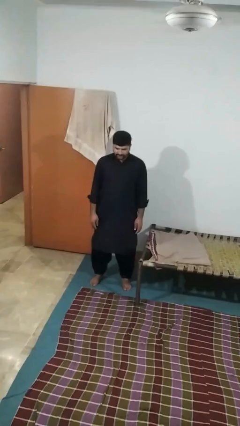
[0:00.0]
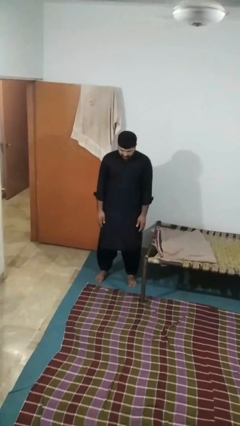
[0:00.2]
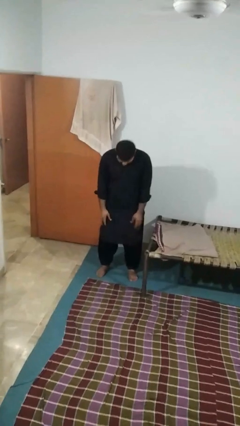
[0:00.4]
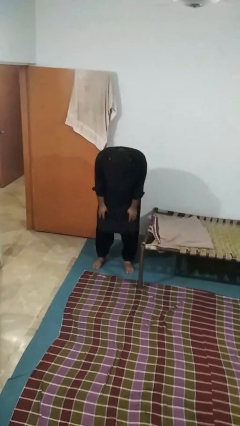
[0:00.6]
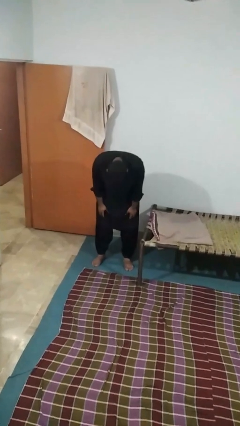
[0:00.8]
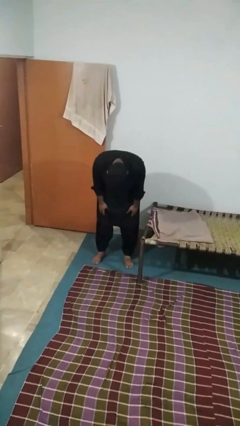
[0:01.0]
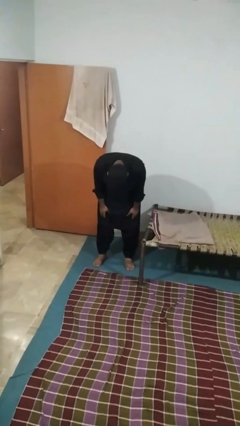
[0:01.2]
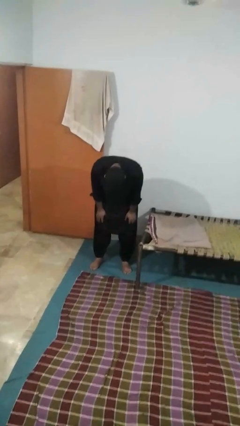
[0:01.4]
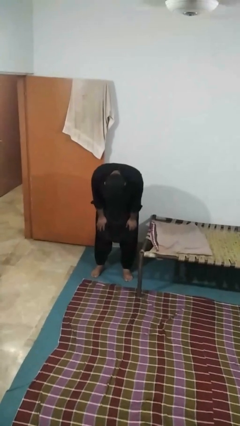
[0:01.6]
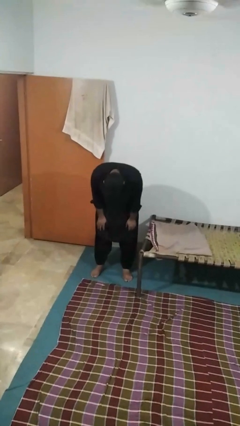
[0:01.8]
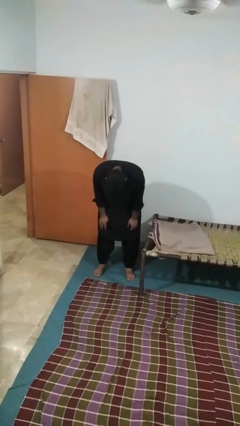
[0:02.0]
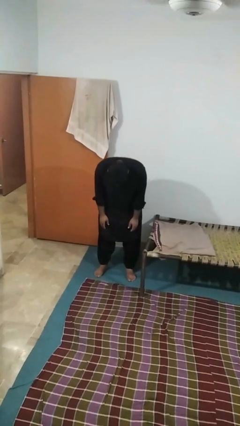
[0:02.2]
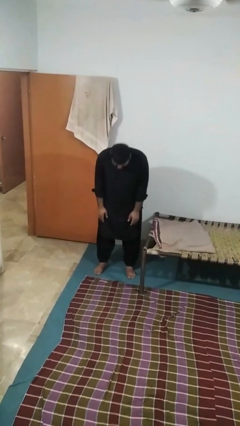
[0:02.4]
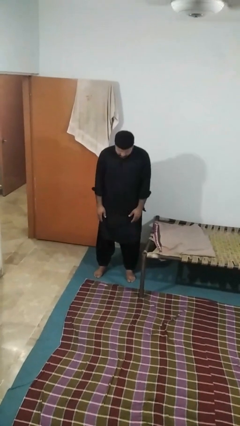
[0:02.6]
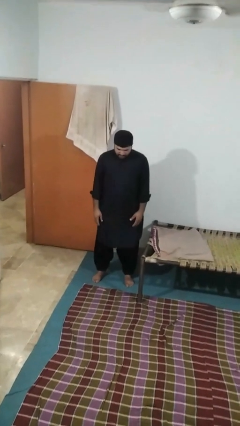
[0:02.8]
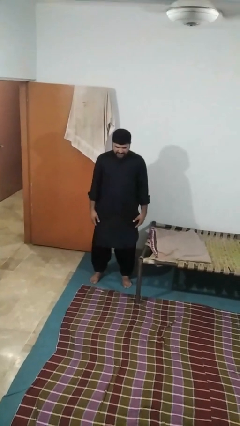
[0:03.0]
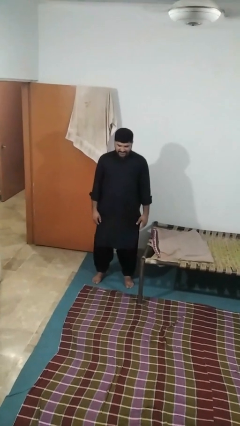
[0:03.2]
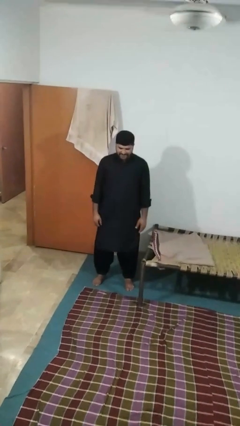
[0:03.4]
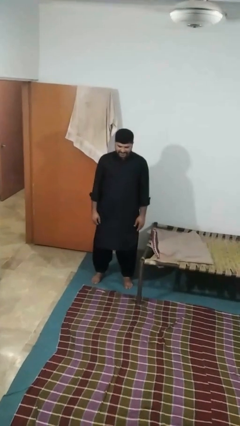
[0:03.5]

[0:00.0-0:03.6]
person bows

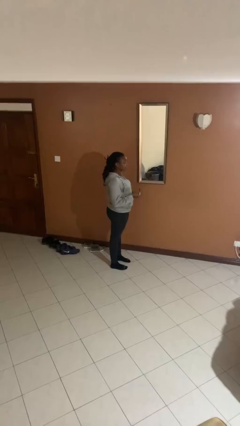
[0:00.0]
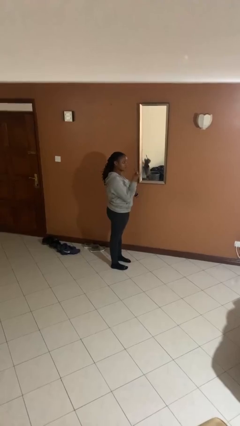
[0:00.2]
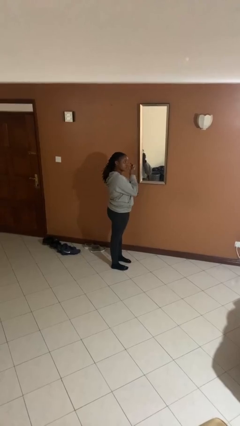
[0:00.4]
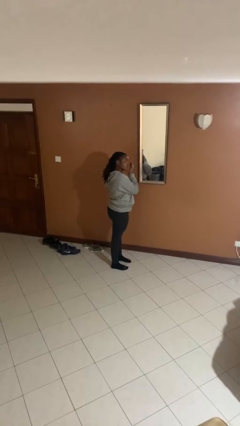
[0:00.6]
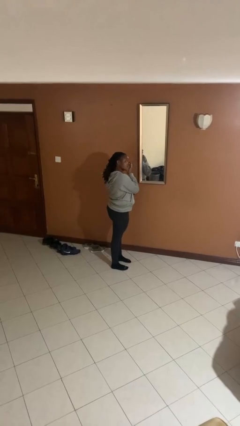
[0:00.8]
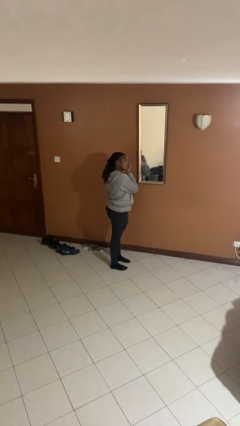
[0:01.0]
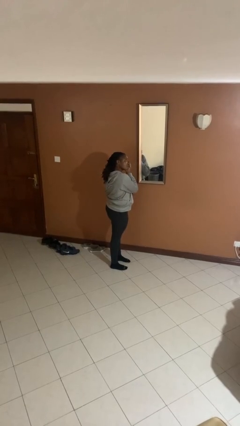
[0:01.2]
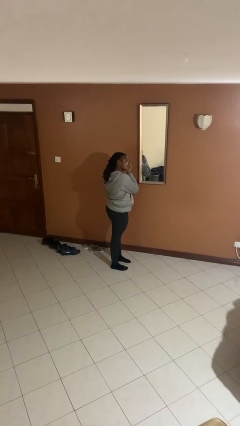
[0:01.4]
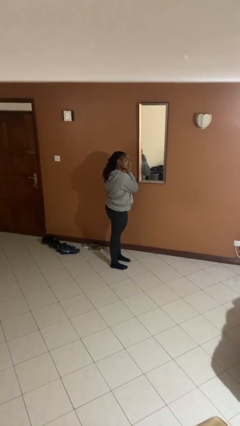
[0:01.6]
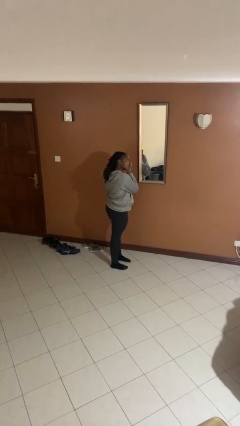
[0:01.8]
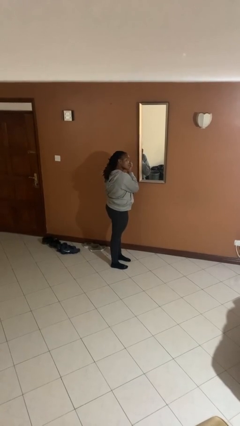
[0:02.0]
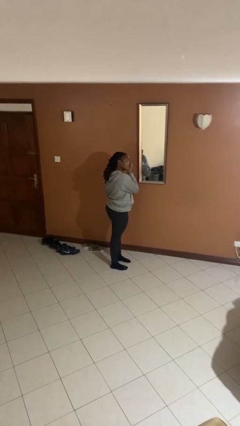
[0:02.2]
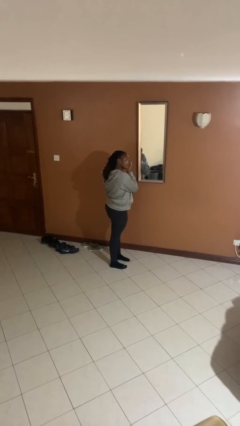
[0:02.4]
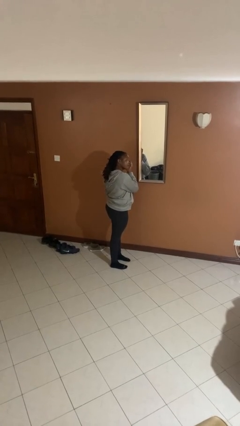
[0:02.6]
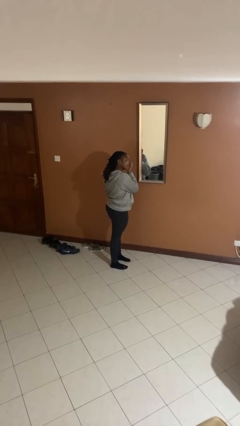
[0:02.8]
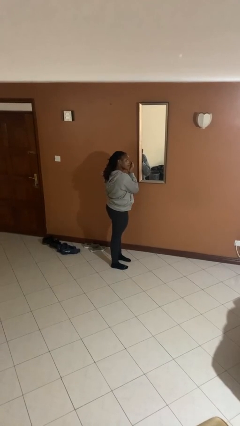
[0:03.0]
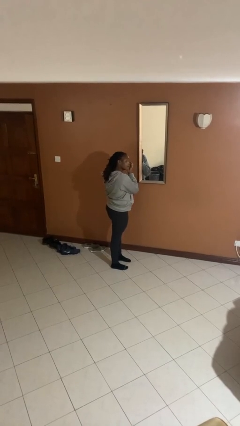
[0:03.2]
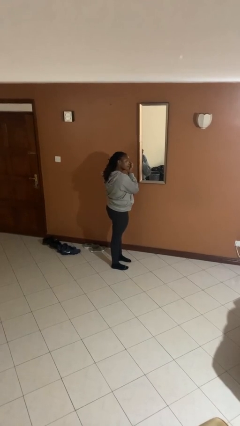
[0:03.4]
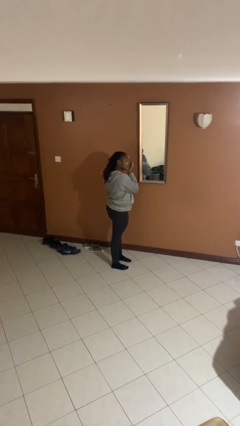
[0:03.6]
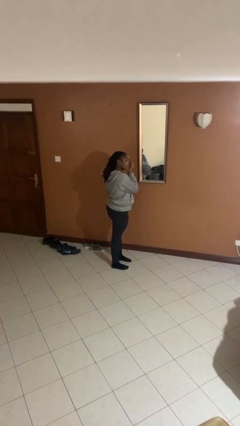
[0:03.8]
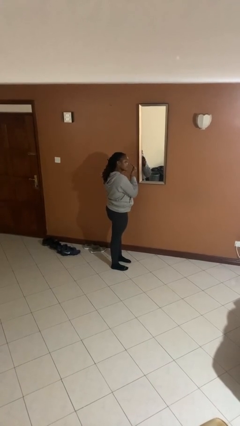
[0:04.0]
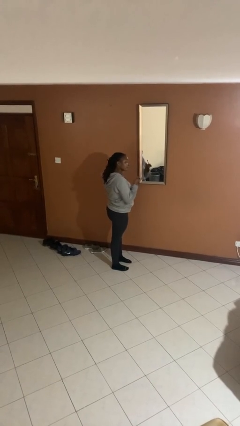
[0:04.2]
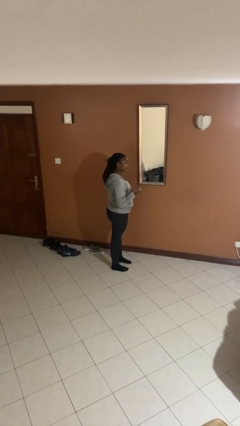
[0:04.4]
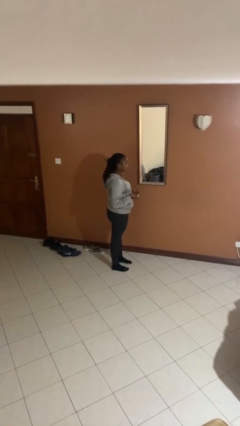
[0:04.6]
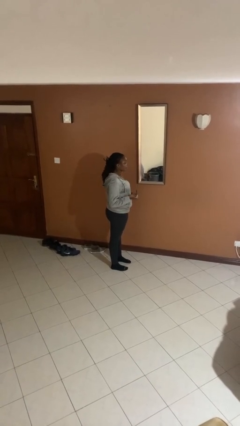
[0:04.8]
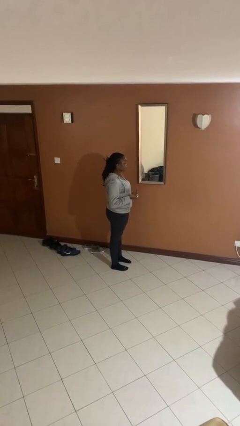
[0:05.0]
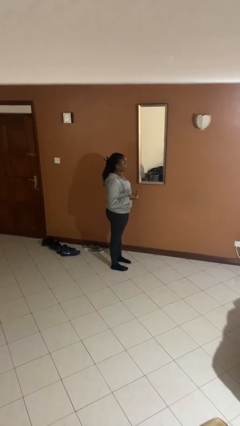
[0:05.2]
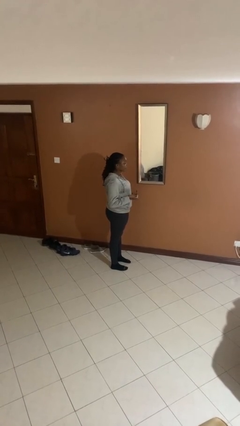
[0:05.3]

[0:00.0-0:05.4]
person applies eye makeup

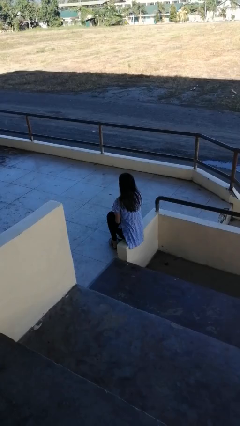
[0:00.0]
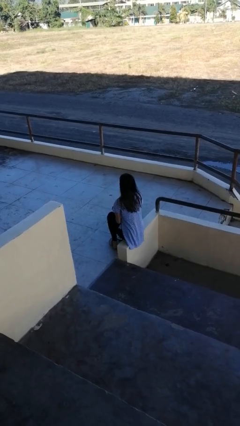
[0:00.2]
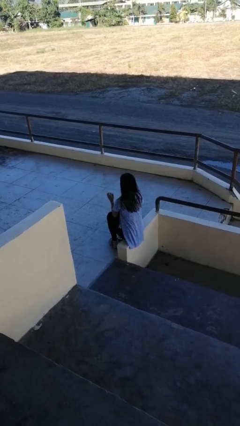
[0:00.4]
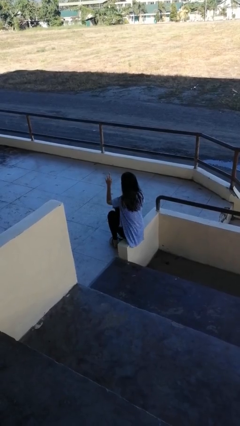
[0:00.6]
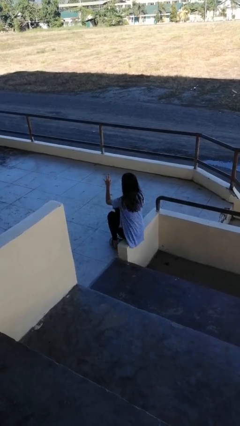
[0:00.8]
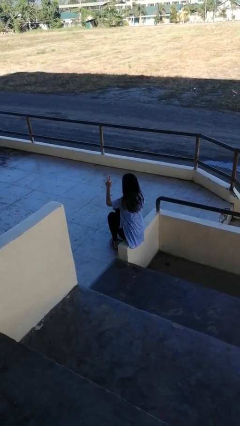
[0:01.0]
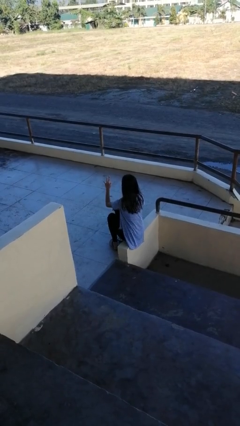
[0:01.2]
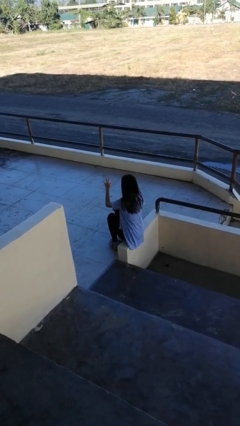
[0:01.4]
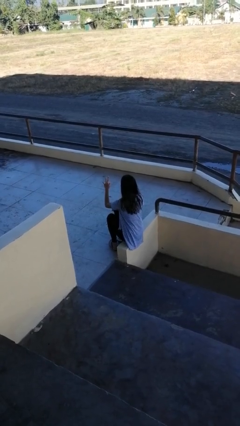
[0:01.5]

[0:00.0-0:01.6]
person gestures number three

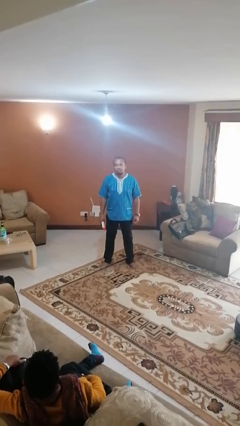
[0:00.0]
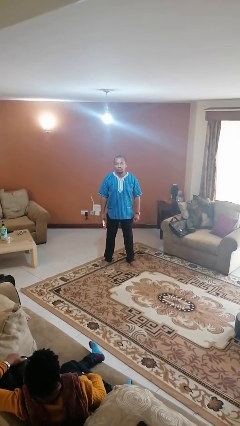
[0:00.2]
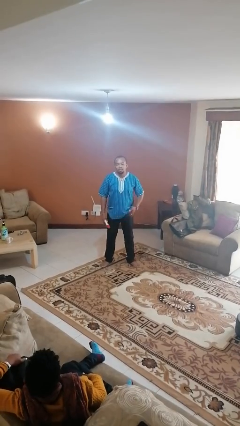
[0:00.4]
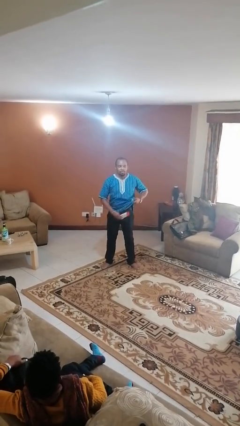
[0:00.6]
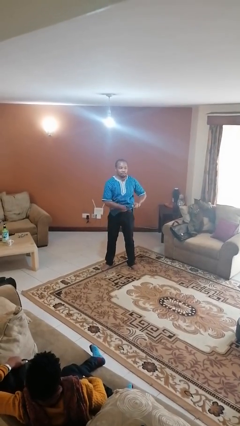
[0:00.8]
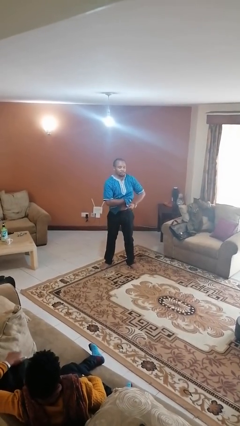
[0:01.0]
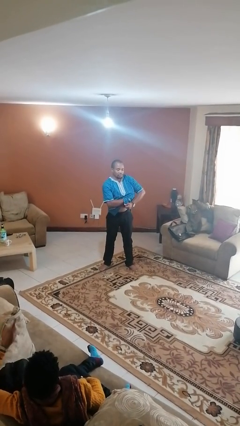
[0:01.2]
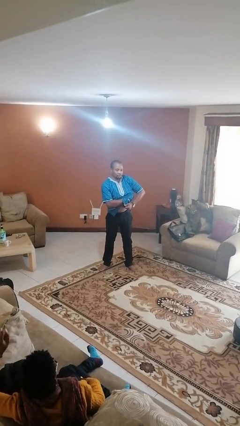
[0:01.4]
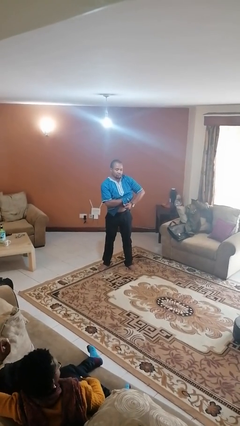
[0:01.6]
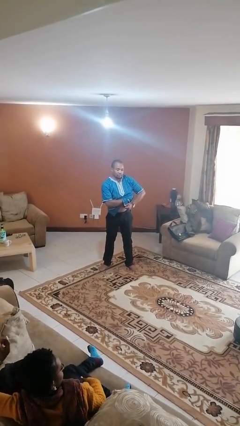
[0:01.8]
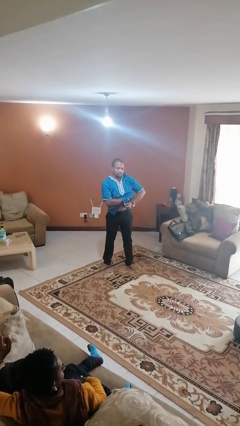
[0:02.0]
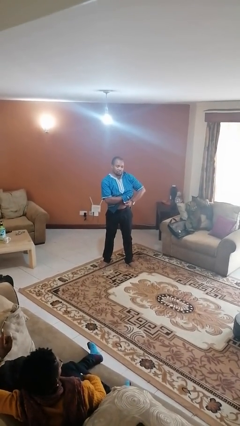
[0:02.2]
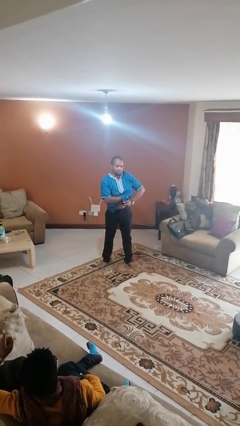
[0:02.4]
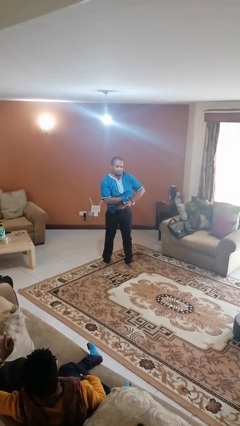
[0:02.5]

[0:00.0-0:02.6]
person applies deodorant

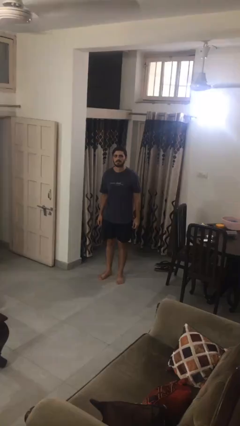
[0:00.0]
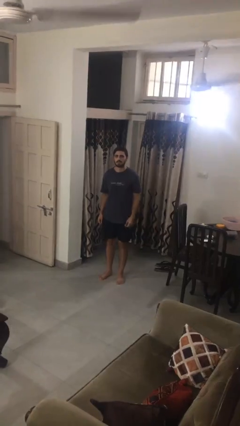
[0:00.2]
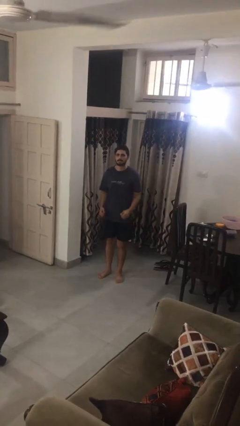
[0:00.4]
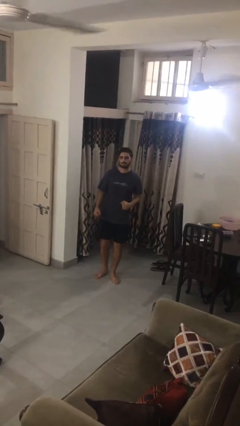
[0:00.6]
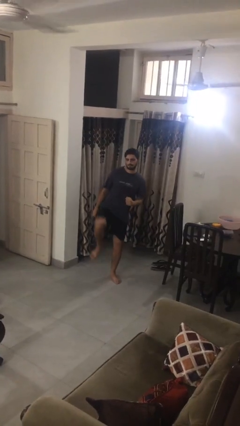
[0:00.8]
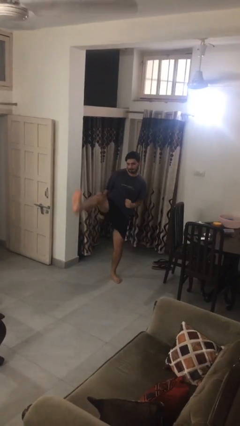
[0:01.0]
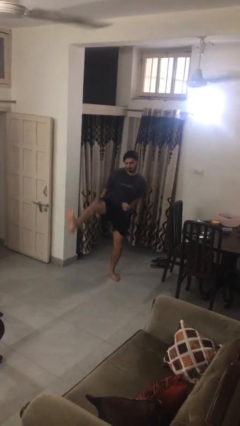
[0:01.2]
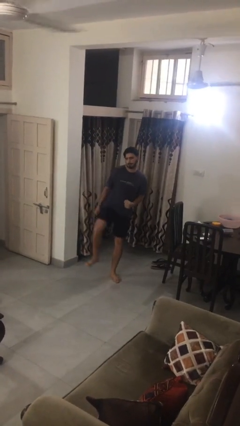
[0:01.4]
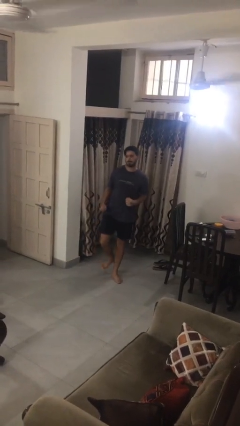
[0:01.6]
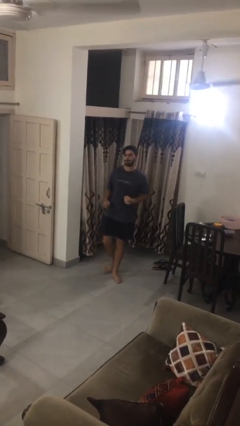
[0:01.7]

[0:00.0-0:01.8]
person karate kicks

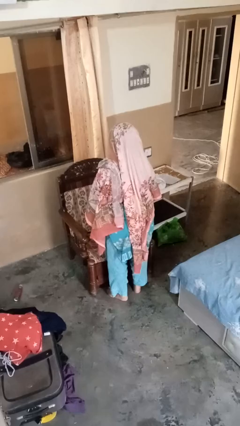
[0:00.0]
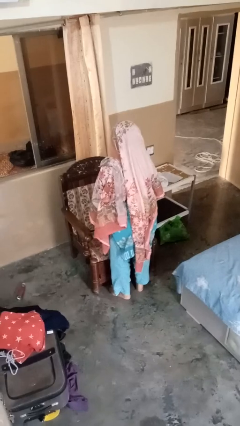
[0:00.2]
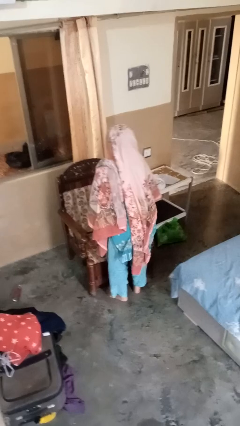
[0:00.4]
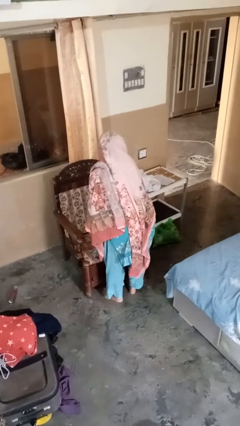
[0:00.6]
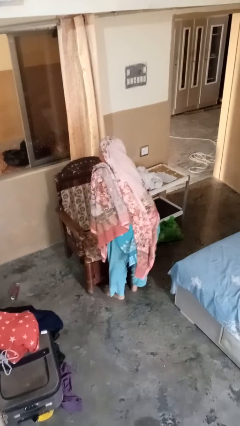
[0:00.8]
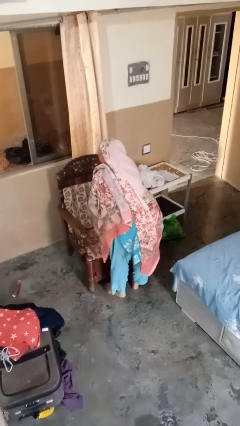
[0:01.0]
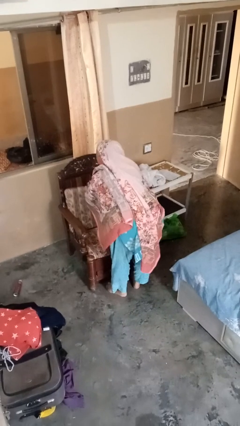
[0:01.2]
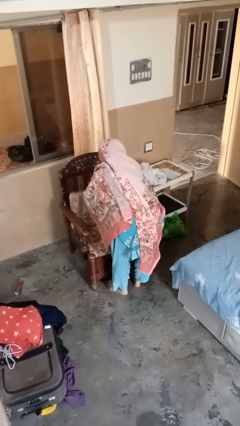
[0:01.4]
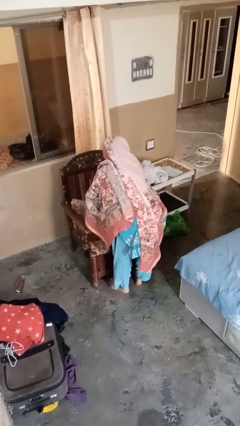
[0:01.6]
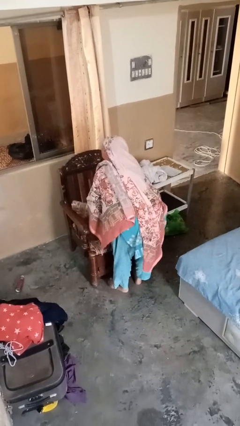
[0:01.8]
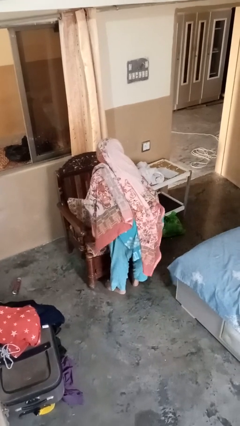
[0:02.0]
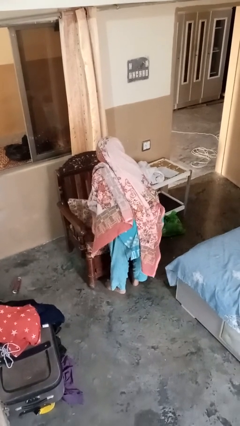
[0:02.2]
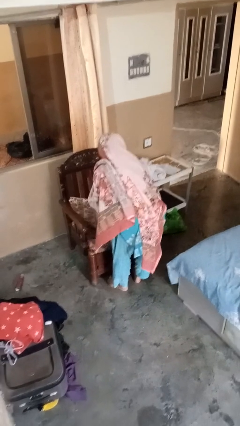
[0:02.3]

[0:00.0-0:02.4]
person searches in couch

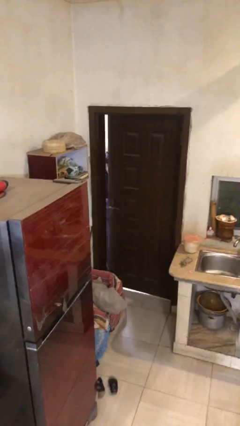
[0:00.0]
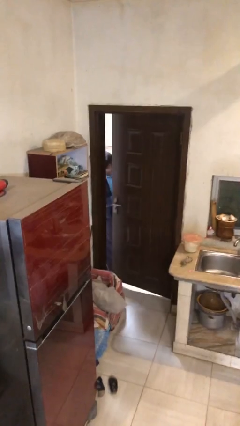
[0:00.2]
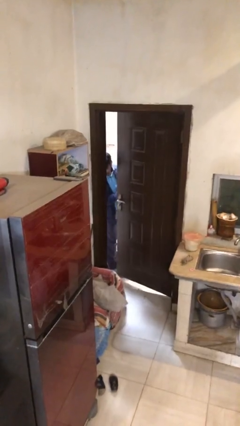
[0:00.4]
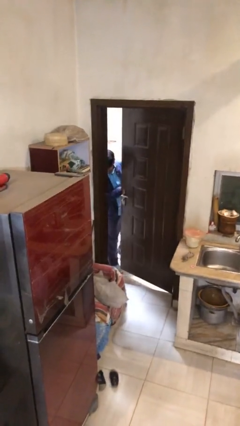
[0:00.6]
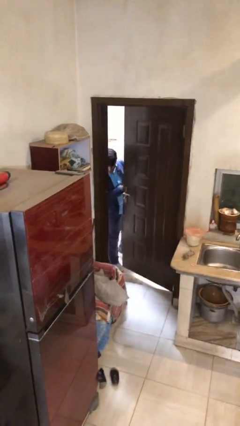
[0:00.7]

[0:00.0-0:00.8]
person opens facility door
